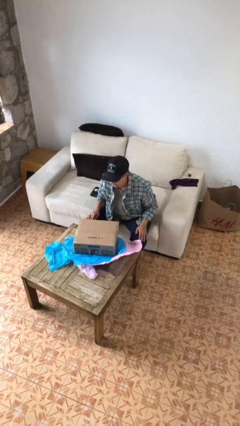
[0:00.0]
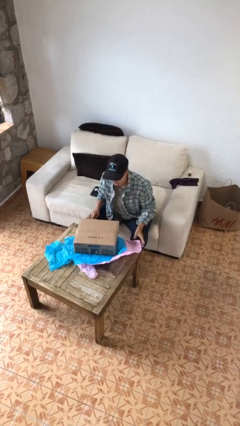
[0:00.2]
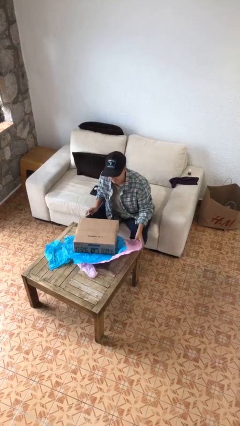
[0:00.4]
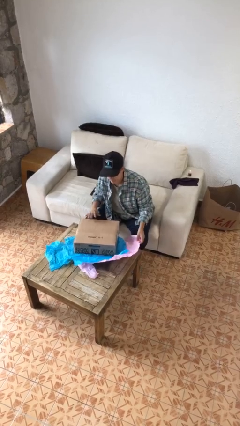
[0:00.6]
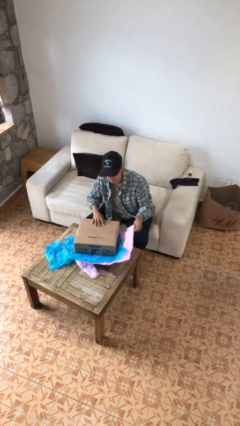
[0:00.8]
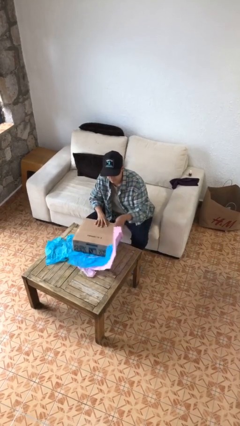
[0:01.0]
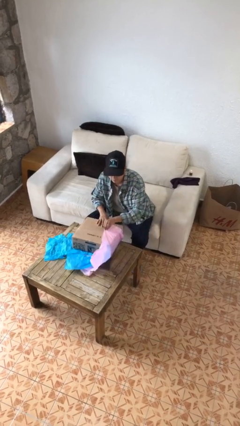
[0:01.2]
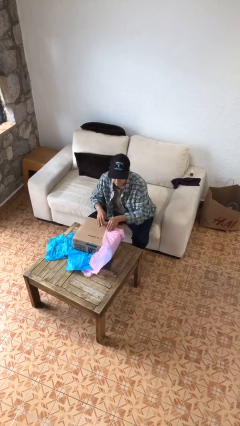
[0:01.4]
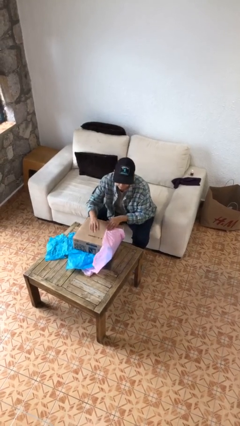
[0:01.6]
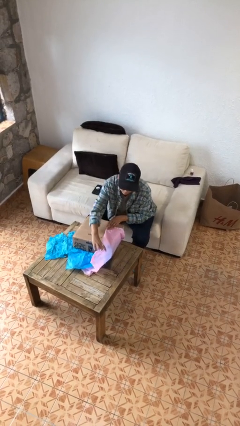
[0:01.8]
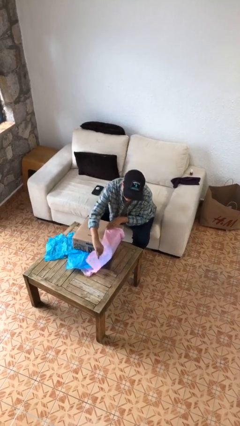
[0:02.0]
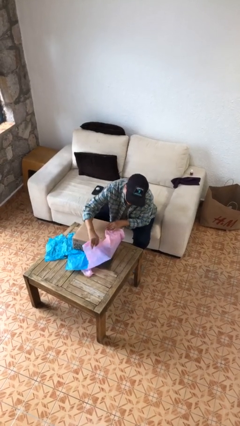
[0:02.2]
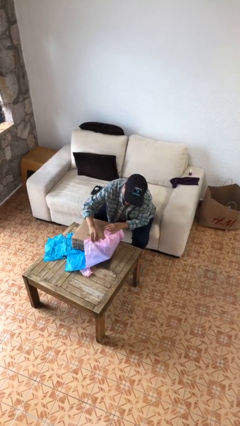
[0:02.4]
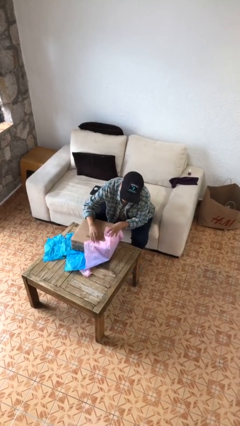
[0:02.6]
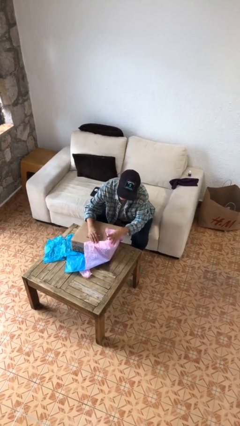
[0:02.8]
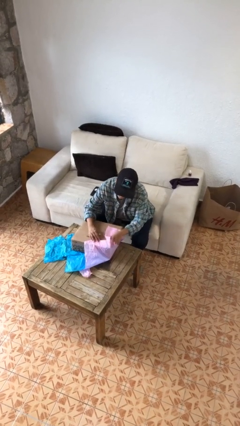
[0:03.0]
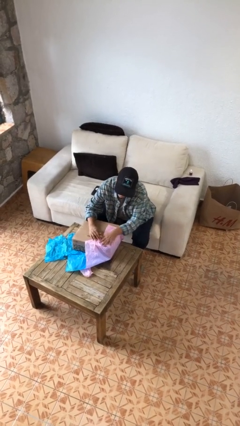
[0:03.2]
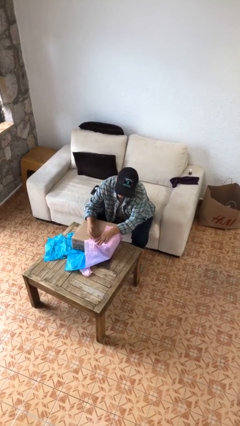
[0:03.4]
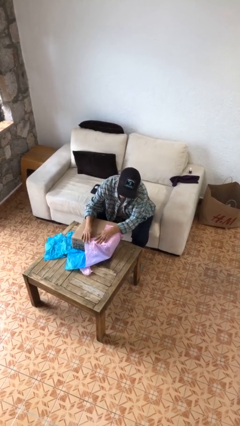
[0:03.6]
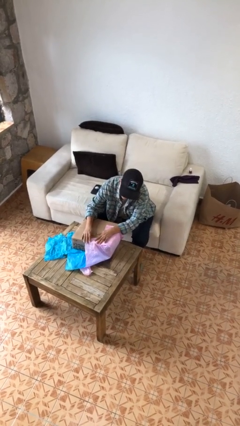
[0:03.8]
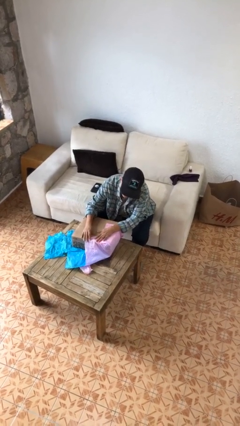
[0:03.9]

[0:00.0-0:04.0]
person wraps box

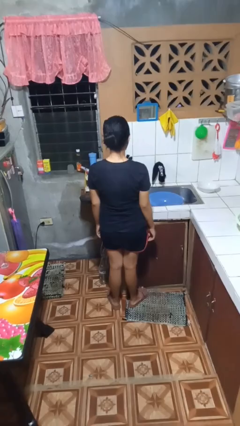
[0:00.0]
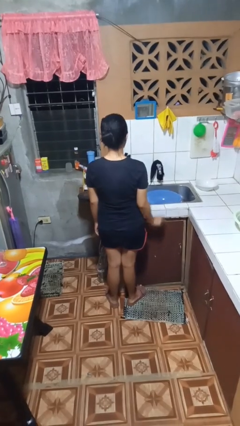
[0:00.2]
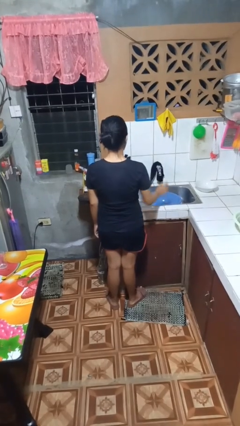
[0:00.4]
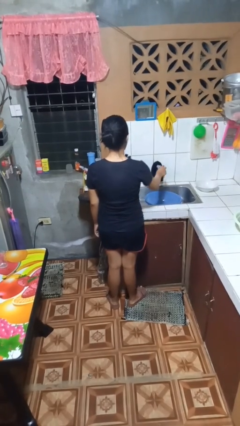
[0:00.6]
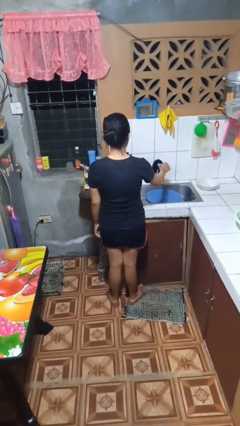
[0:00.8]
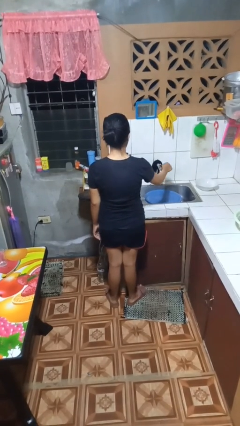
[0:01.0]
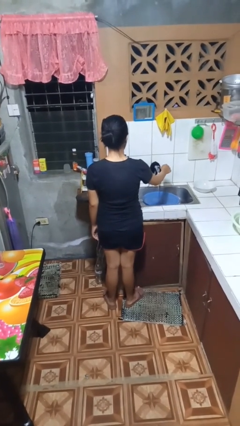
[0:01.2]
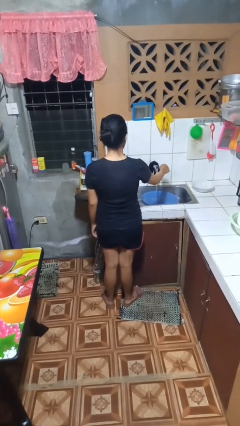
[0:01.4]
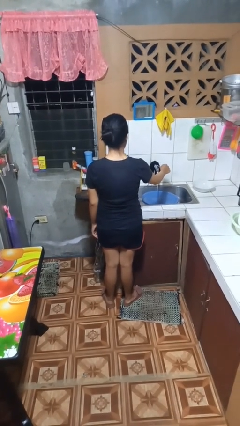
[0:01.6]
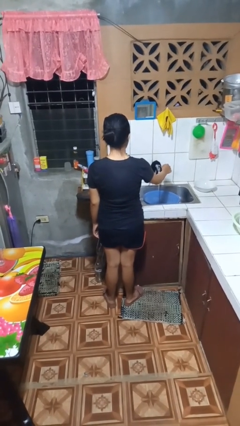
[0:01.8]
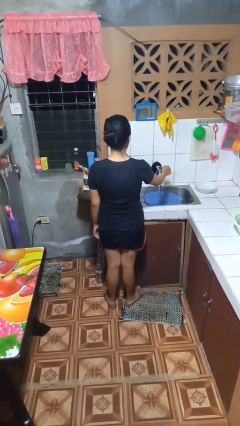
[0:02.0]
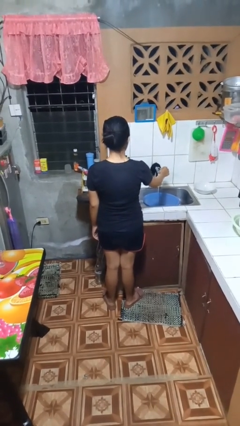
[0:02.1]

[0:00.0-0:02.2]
person turns on faucet

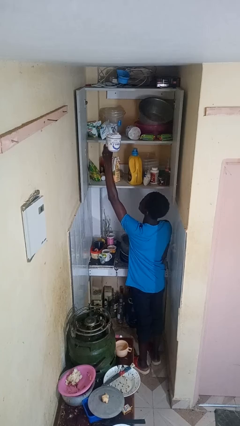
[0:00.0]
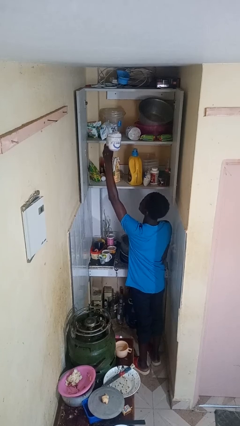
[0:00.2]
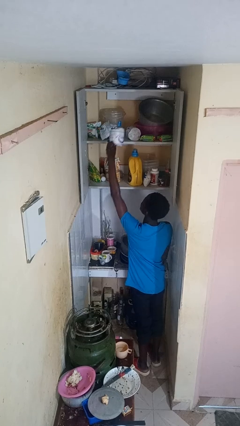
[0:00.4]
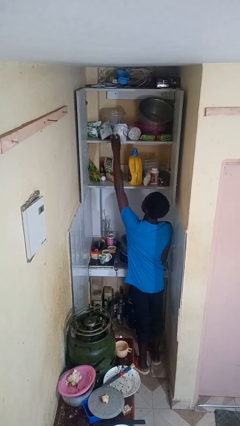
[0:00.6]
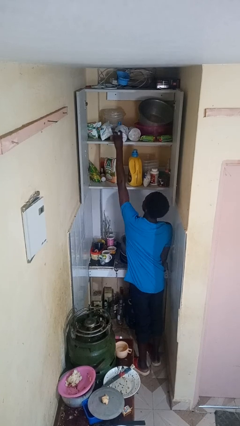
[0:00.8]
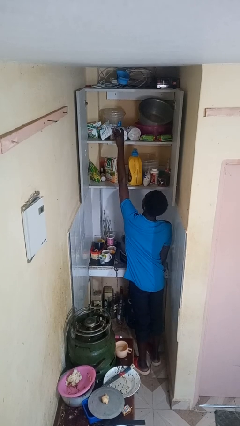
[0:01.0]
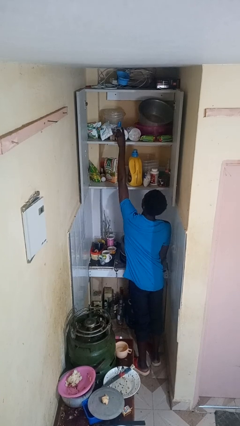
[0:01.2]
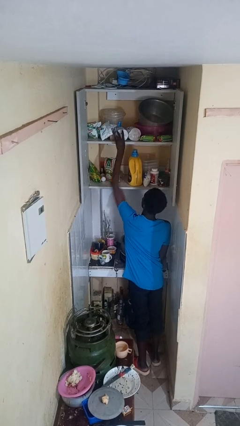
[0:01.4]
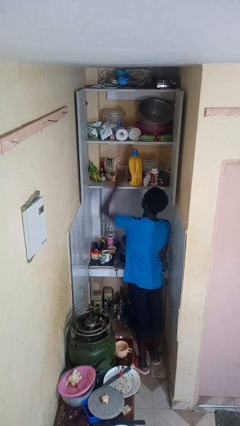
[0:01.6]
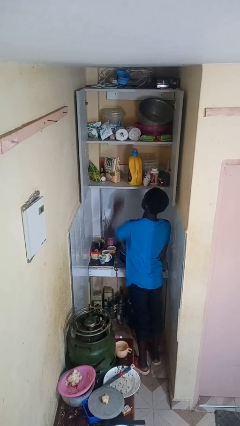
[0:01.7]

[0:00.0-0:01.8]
person puts object in cabinet

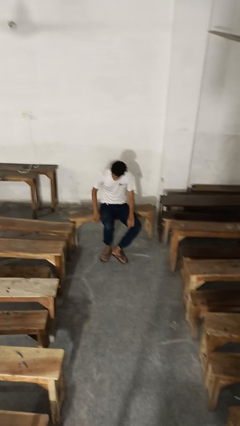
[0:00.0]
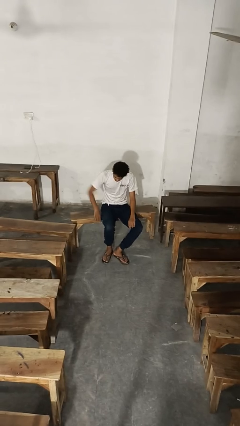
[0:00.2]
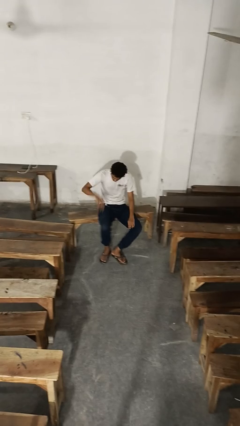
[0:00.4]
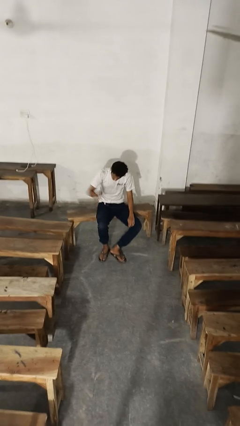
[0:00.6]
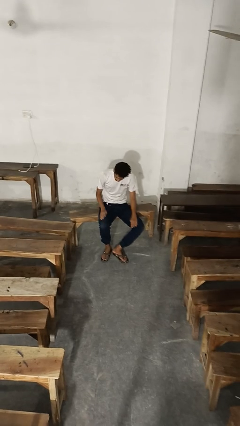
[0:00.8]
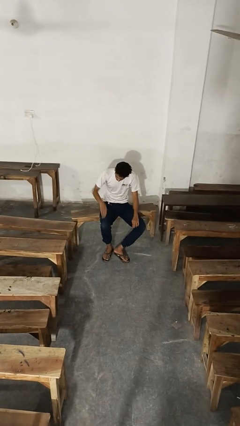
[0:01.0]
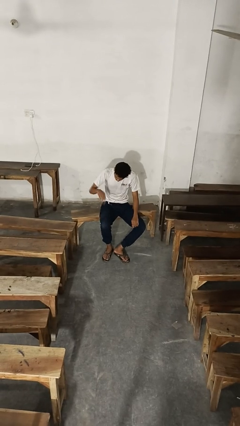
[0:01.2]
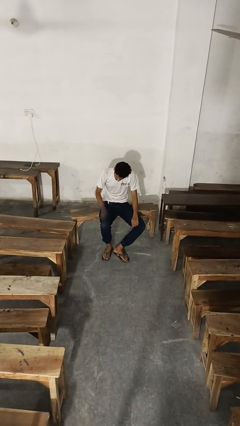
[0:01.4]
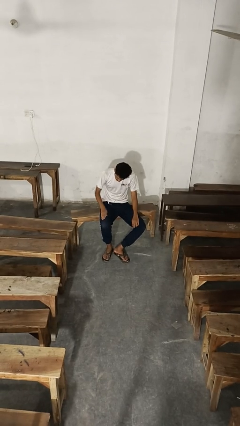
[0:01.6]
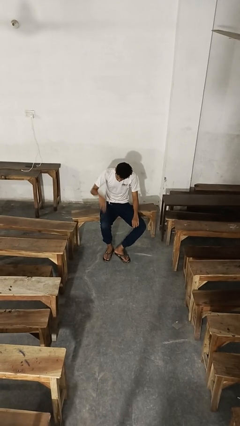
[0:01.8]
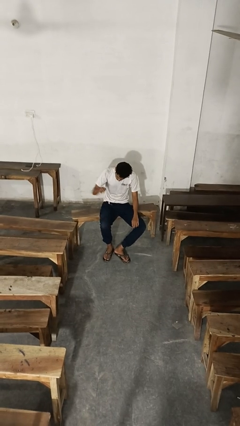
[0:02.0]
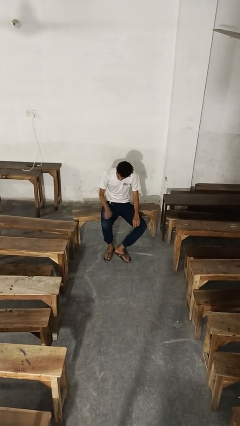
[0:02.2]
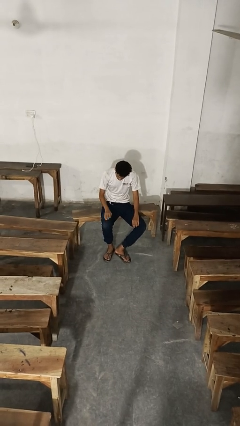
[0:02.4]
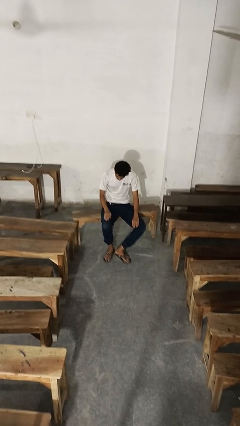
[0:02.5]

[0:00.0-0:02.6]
person slaps hands on thighs

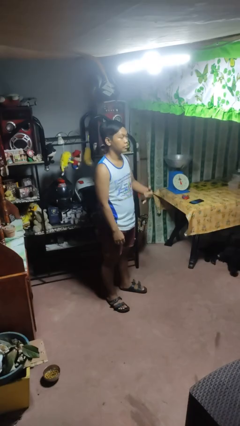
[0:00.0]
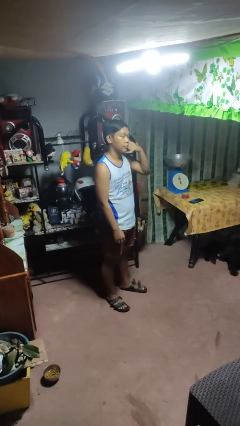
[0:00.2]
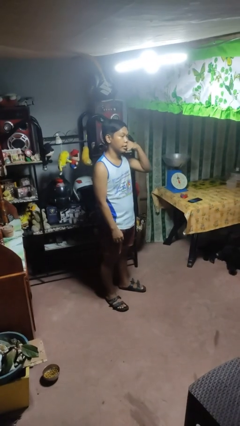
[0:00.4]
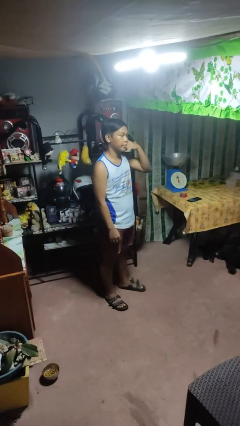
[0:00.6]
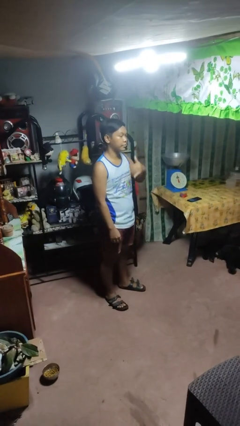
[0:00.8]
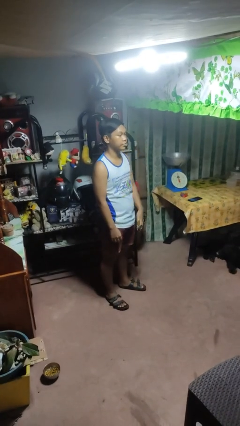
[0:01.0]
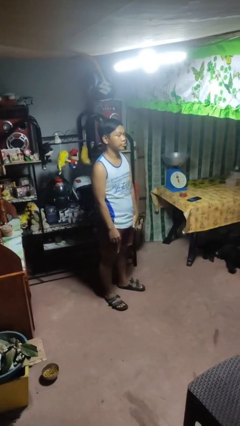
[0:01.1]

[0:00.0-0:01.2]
person gestures call me

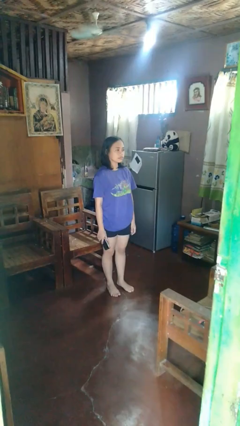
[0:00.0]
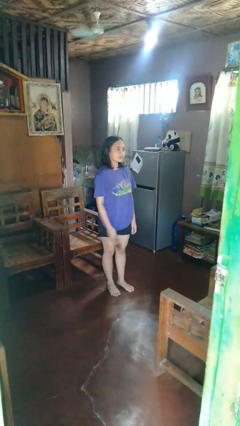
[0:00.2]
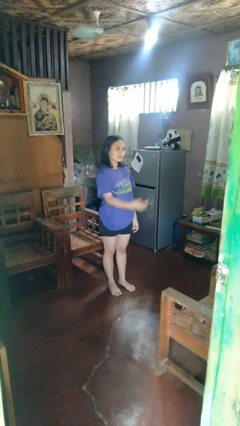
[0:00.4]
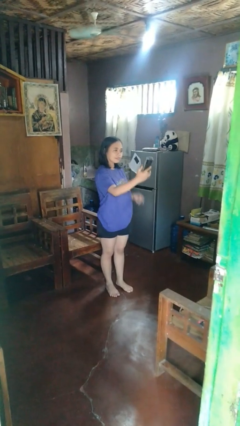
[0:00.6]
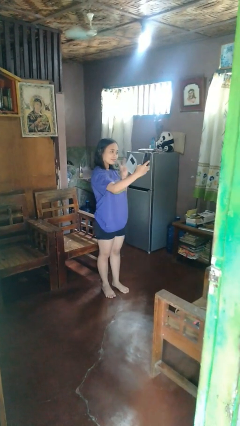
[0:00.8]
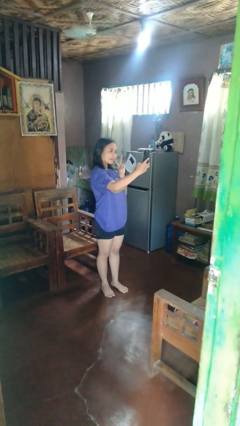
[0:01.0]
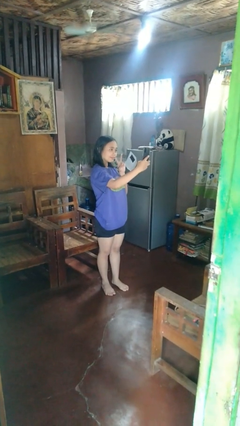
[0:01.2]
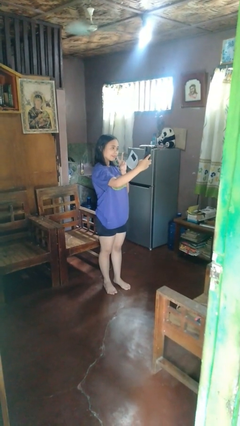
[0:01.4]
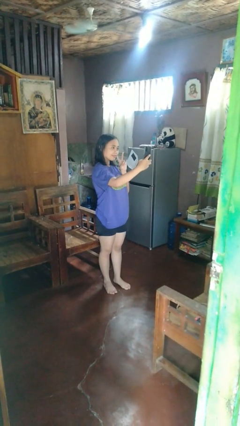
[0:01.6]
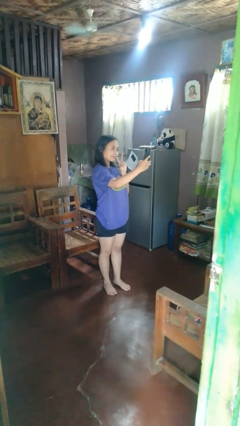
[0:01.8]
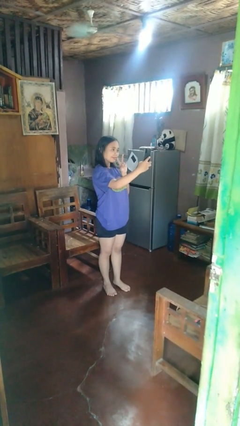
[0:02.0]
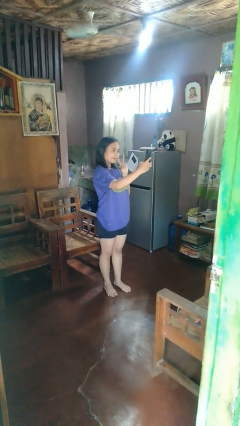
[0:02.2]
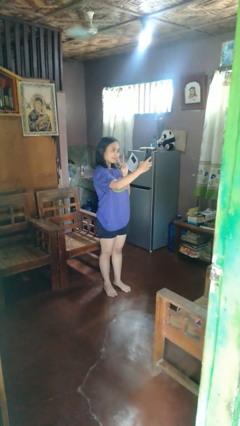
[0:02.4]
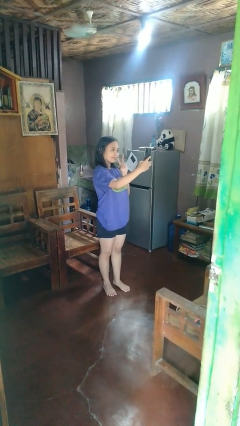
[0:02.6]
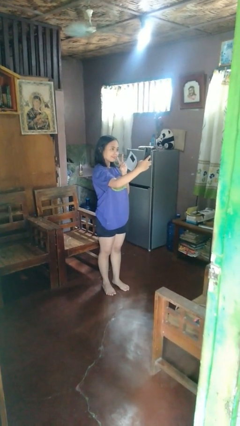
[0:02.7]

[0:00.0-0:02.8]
person takes selfie

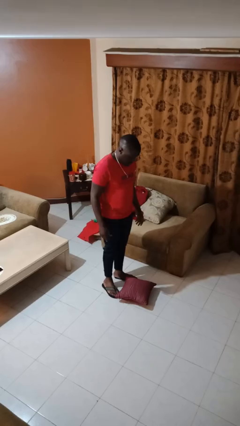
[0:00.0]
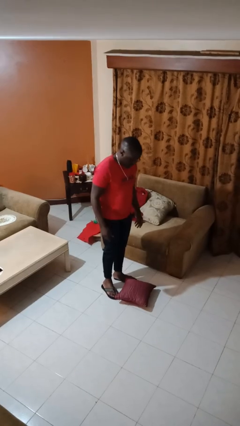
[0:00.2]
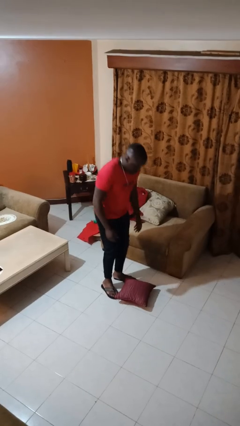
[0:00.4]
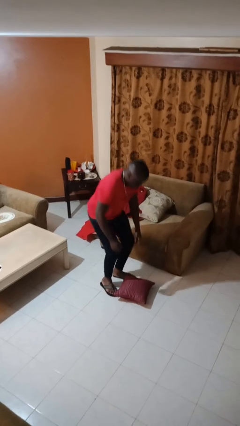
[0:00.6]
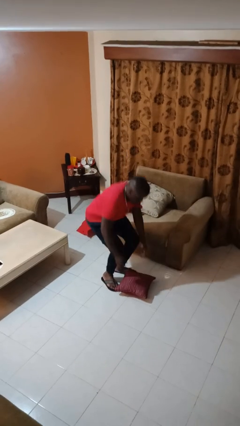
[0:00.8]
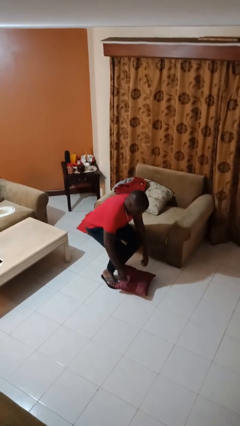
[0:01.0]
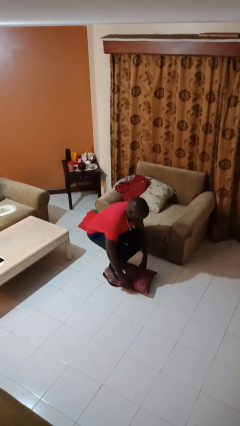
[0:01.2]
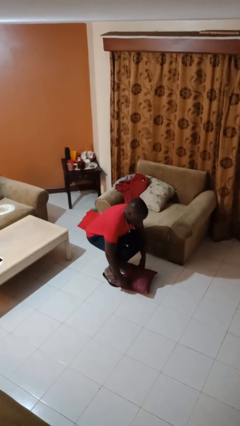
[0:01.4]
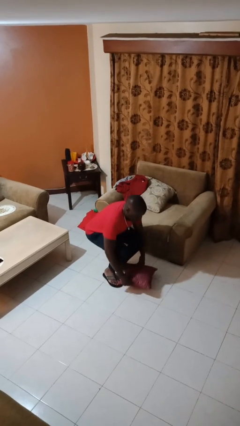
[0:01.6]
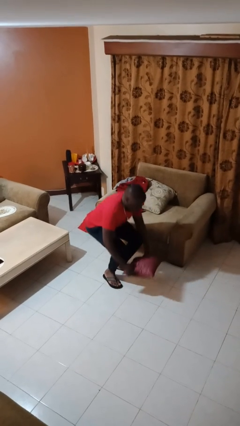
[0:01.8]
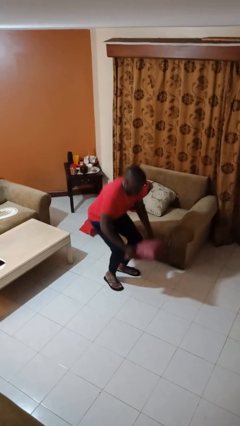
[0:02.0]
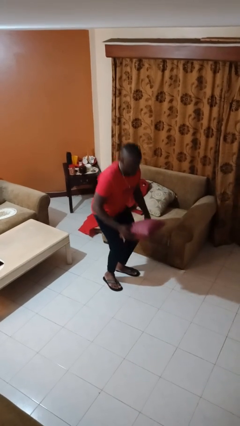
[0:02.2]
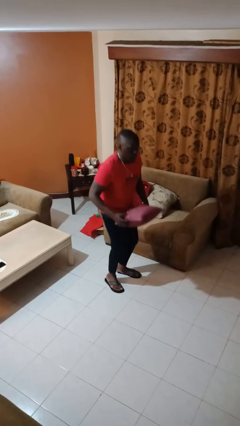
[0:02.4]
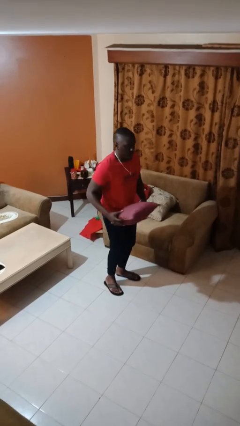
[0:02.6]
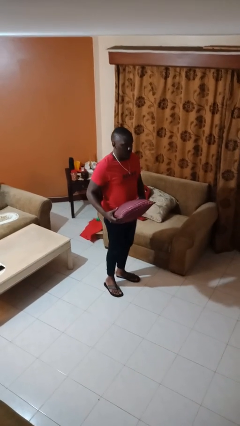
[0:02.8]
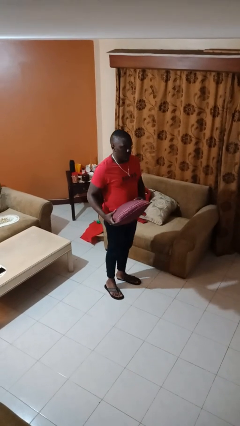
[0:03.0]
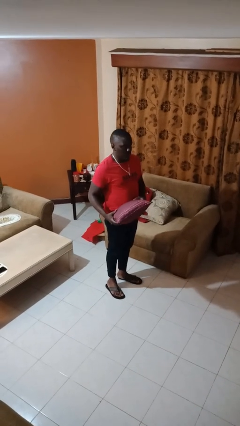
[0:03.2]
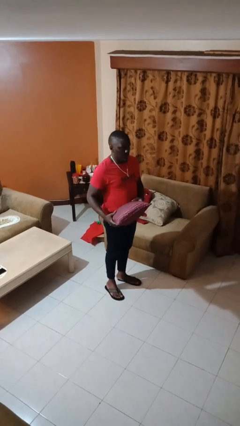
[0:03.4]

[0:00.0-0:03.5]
person picks up object from floor
